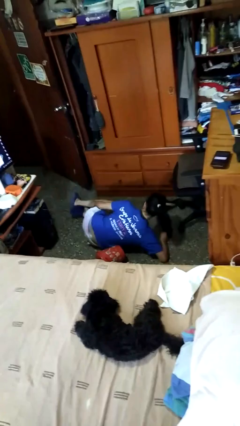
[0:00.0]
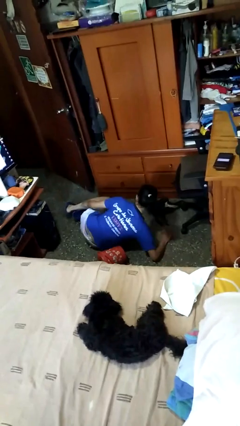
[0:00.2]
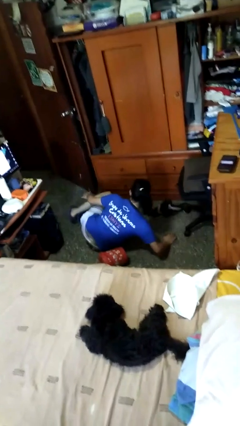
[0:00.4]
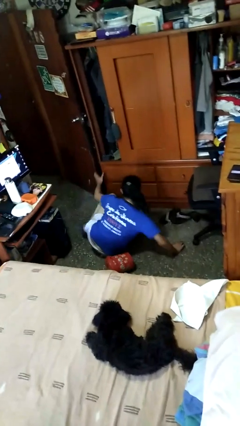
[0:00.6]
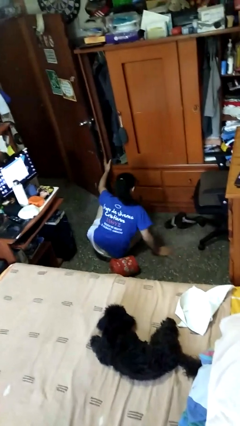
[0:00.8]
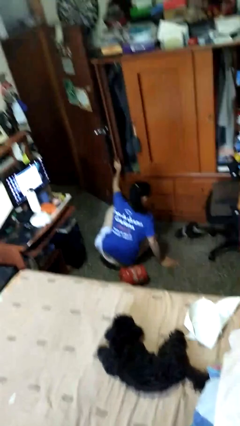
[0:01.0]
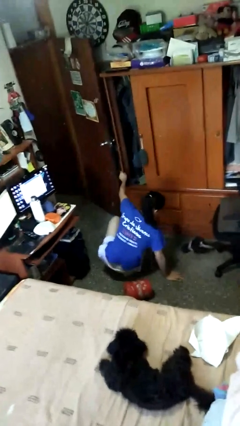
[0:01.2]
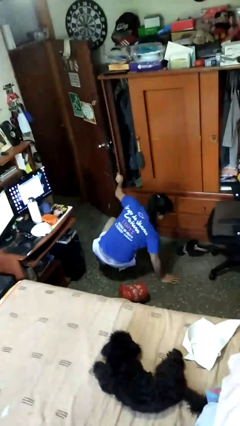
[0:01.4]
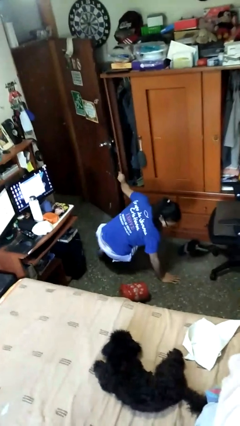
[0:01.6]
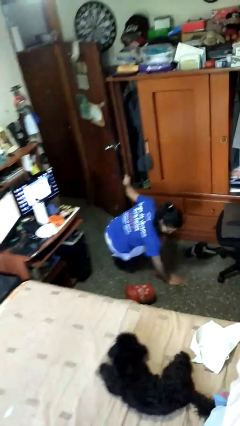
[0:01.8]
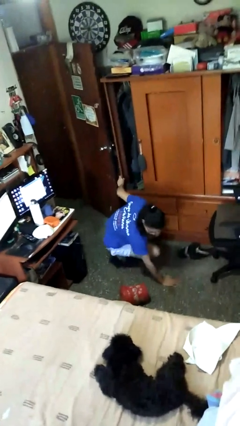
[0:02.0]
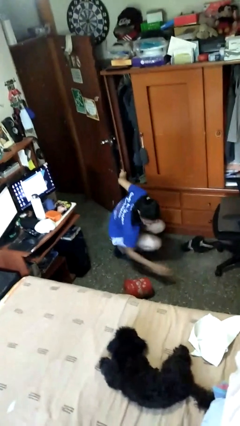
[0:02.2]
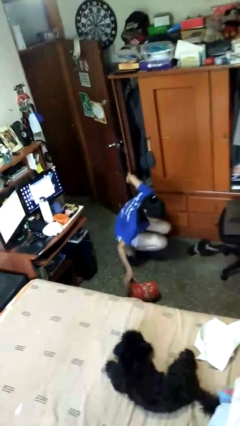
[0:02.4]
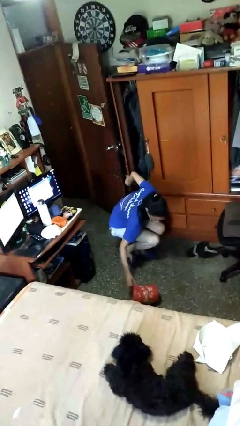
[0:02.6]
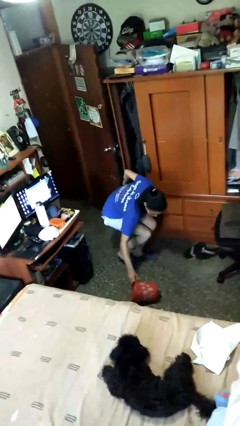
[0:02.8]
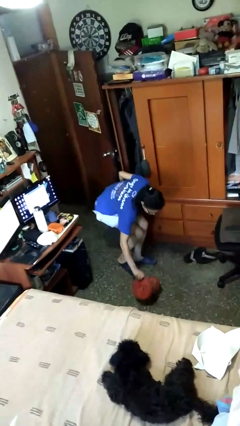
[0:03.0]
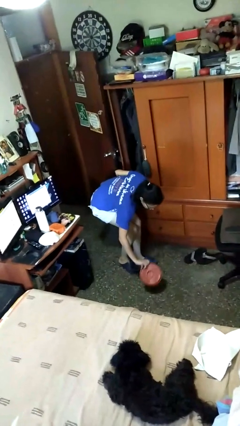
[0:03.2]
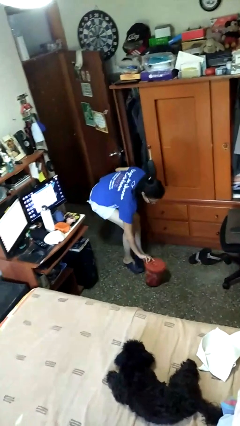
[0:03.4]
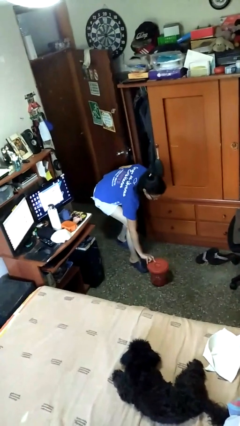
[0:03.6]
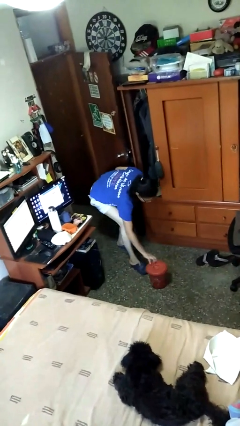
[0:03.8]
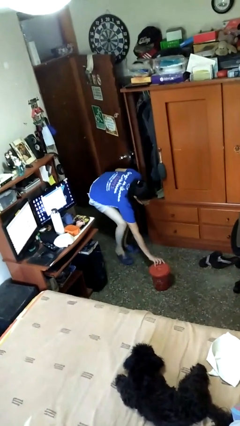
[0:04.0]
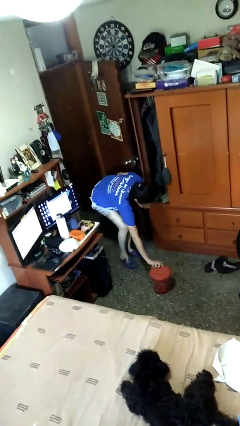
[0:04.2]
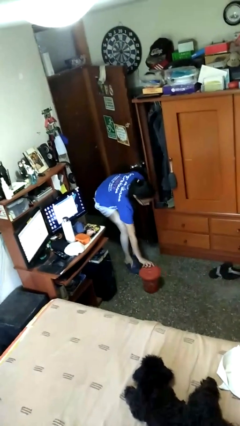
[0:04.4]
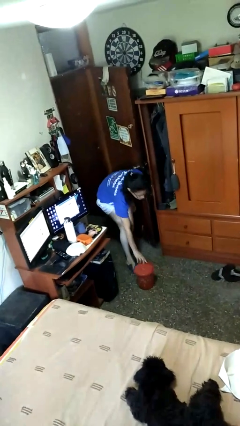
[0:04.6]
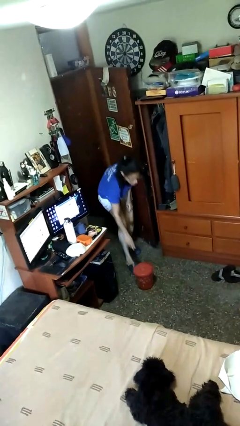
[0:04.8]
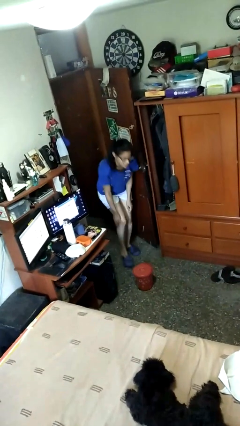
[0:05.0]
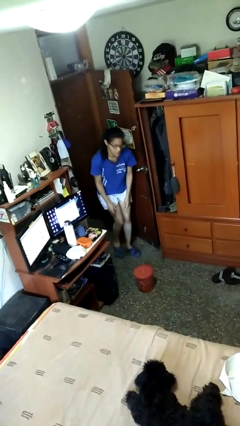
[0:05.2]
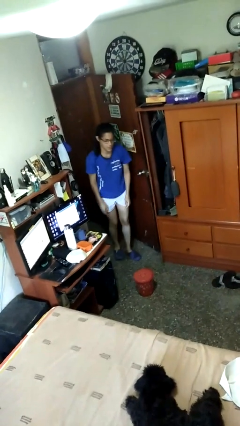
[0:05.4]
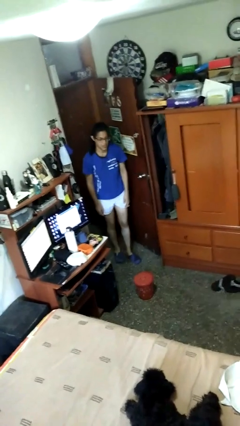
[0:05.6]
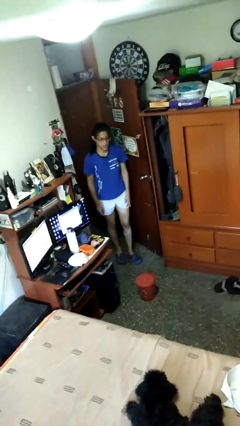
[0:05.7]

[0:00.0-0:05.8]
person stands up from floor

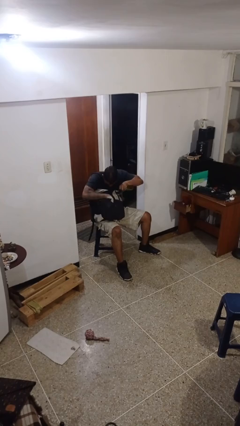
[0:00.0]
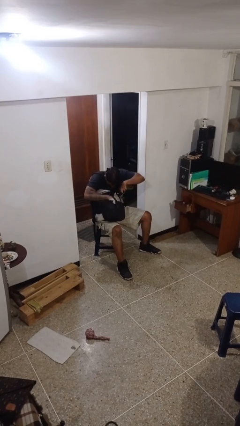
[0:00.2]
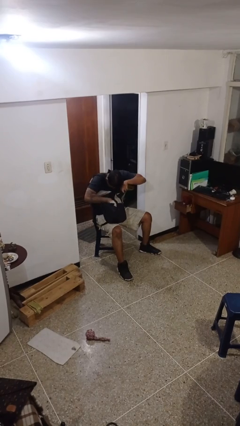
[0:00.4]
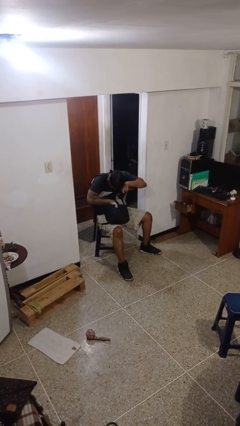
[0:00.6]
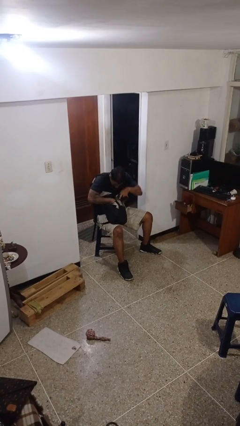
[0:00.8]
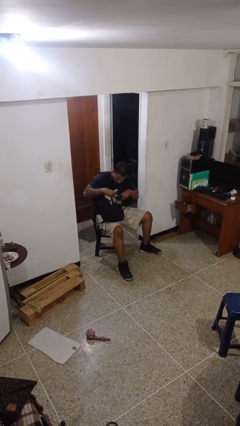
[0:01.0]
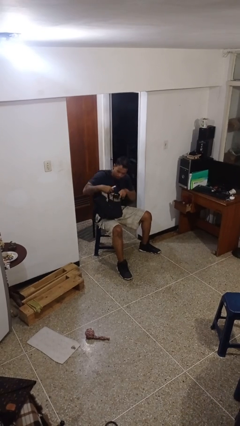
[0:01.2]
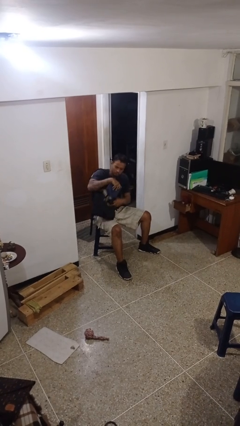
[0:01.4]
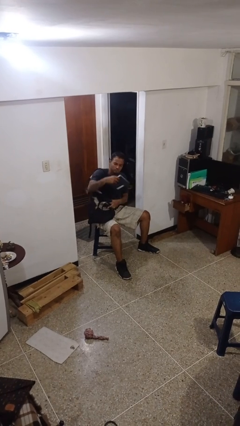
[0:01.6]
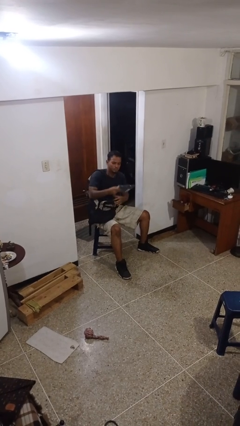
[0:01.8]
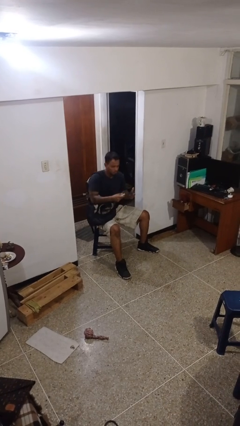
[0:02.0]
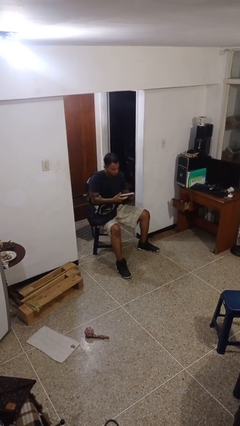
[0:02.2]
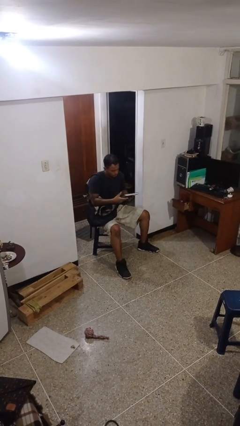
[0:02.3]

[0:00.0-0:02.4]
person takes object from backpack

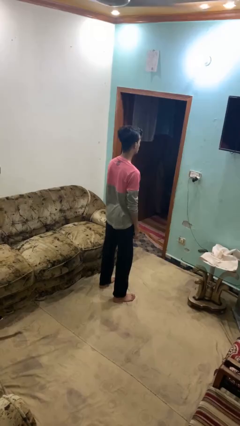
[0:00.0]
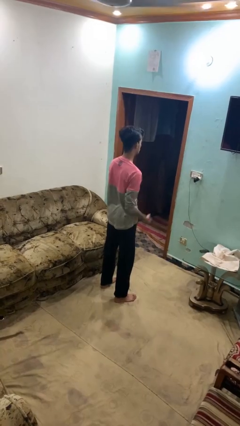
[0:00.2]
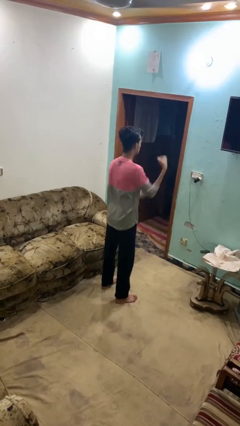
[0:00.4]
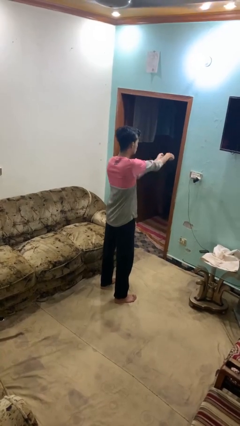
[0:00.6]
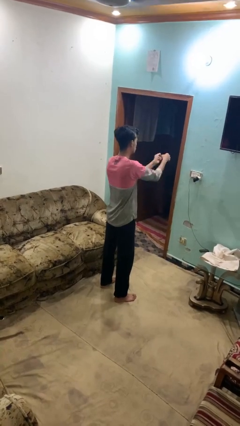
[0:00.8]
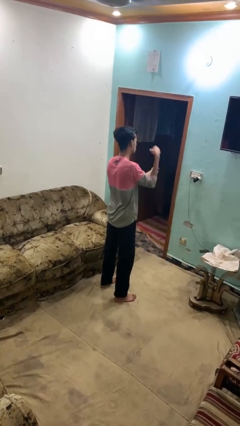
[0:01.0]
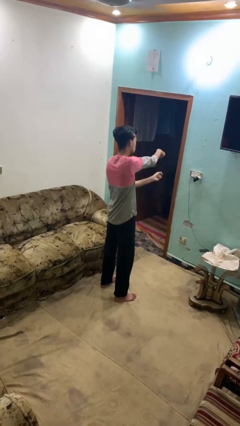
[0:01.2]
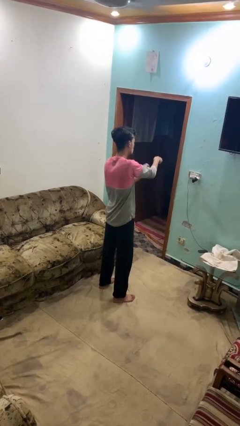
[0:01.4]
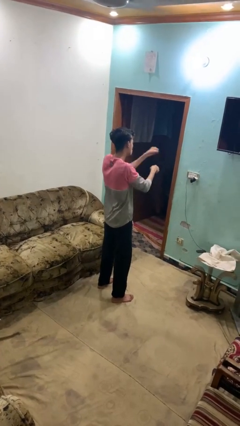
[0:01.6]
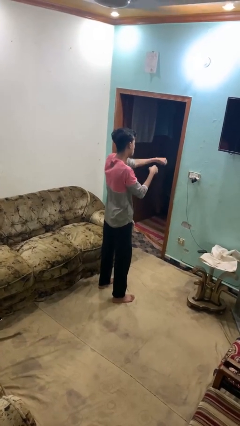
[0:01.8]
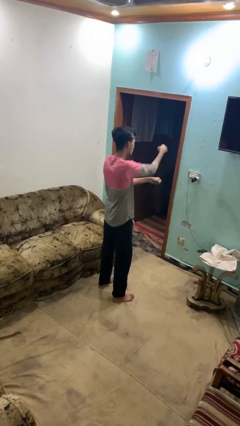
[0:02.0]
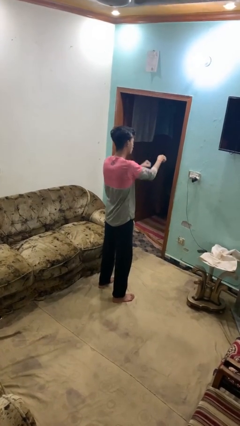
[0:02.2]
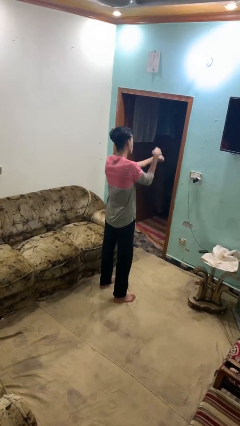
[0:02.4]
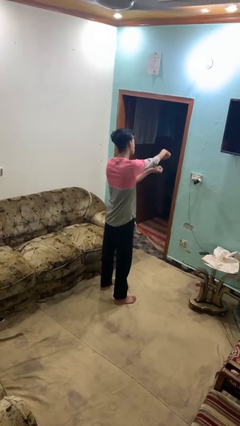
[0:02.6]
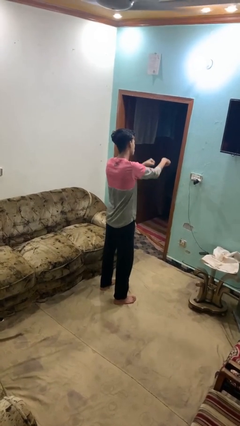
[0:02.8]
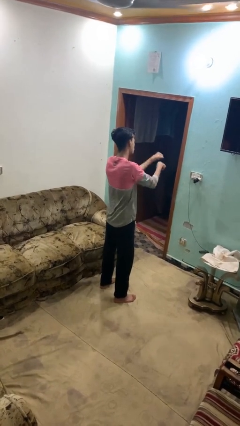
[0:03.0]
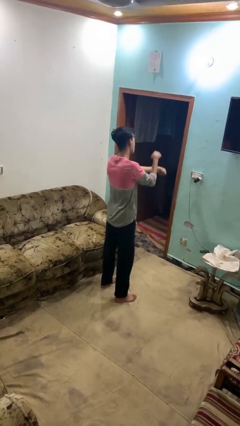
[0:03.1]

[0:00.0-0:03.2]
person punches

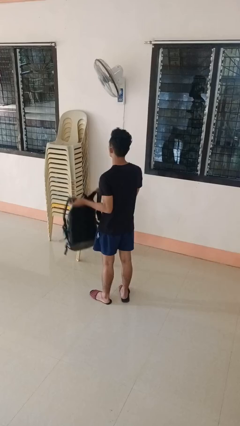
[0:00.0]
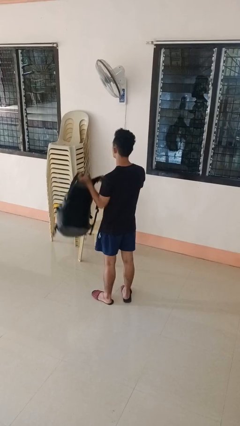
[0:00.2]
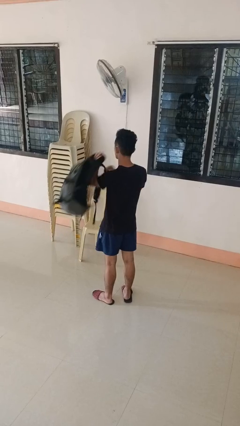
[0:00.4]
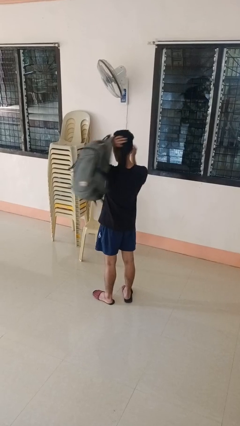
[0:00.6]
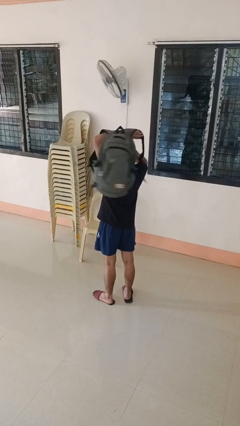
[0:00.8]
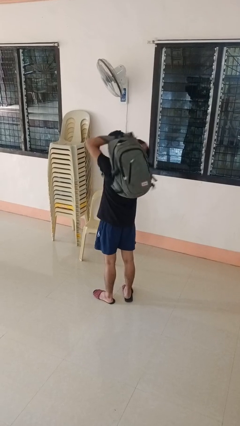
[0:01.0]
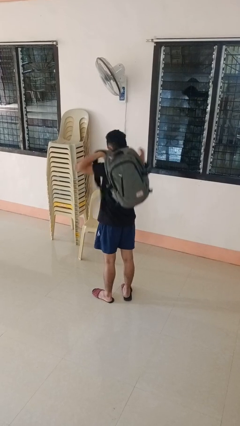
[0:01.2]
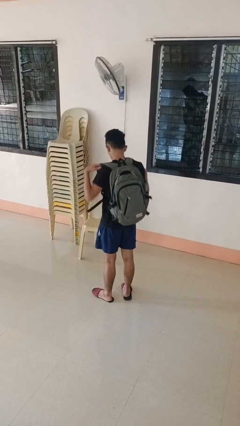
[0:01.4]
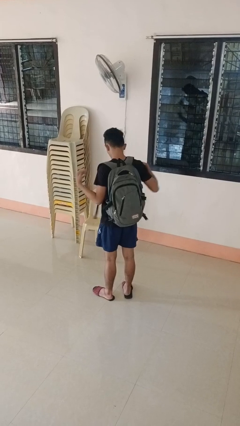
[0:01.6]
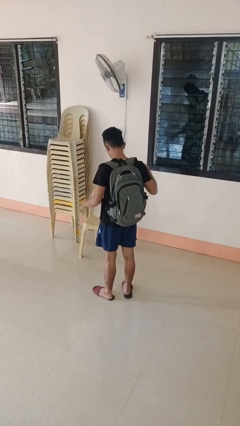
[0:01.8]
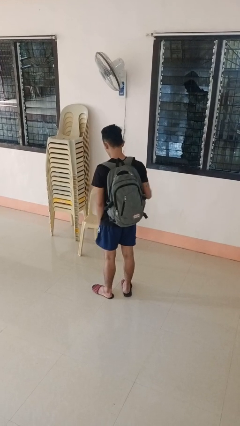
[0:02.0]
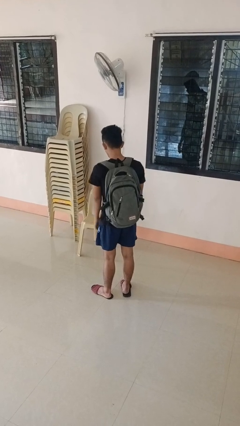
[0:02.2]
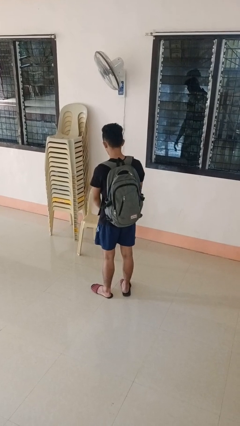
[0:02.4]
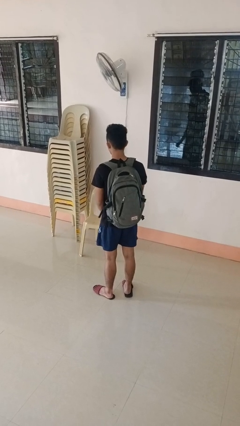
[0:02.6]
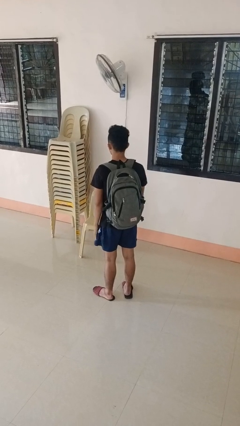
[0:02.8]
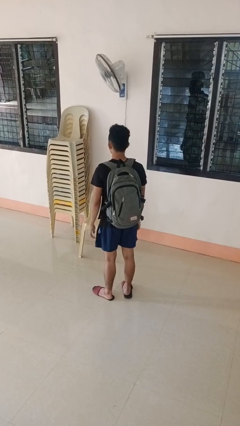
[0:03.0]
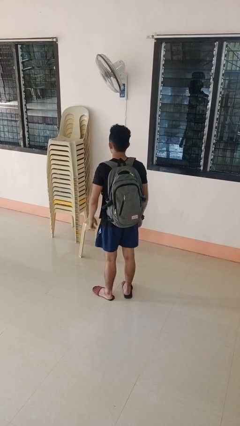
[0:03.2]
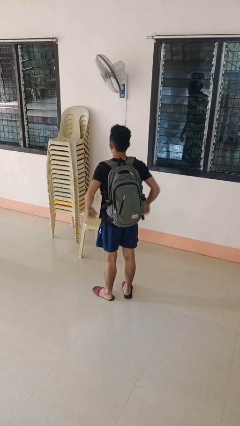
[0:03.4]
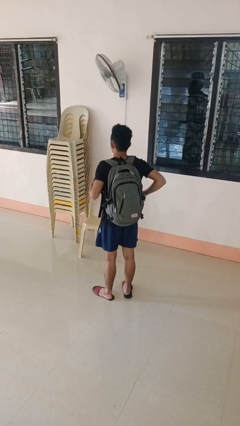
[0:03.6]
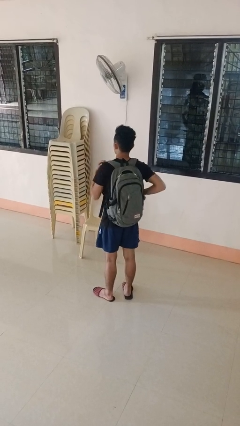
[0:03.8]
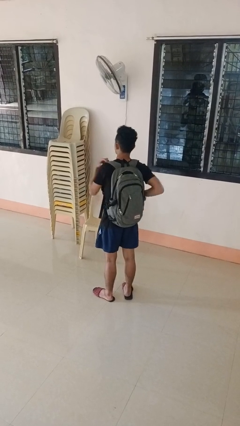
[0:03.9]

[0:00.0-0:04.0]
person puts on backpack

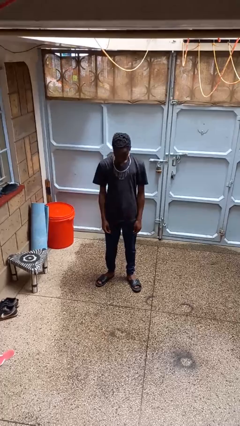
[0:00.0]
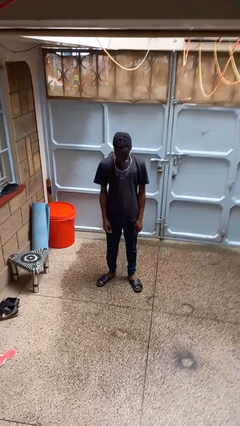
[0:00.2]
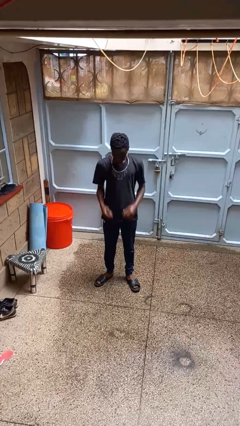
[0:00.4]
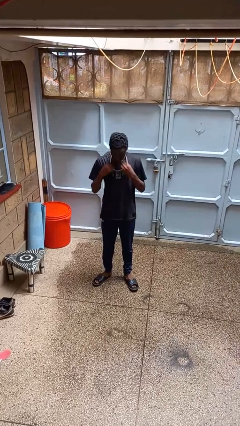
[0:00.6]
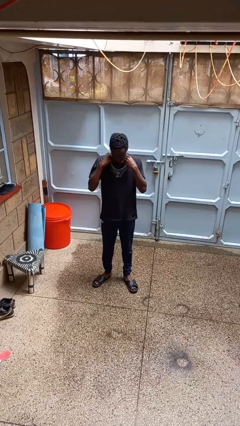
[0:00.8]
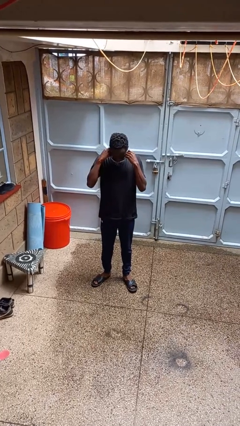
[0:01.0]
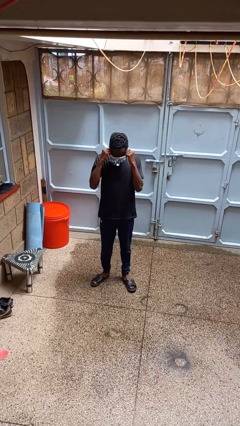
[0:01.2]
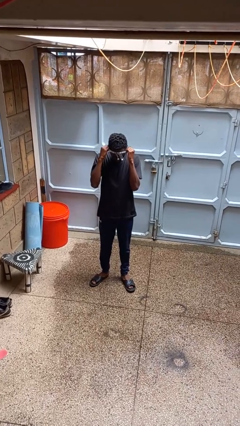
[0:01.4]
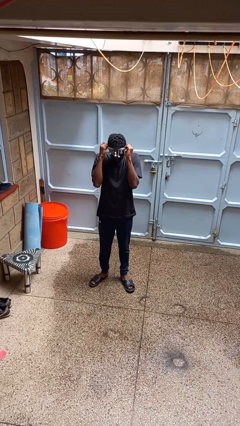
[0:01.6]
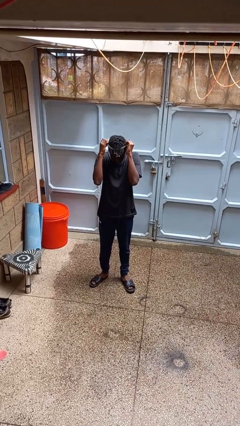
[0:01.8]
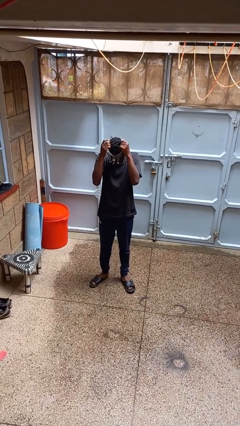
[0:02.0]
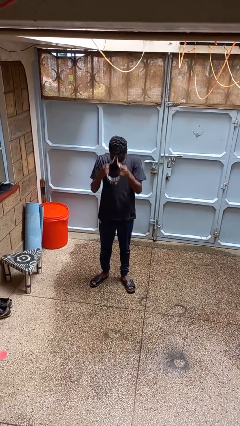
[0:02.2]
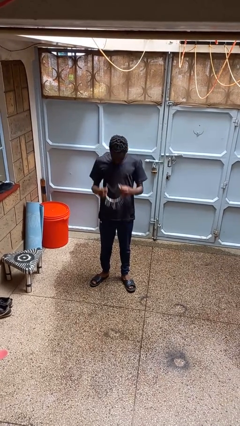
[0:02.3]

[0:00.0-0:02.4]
person takes off necklace
